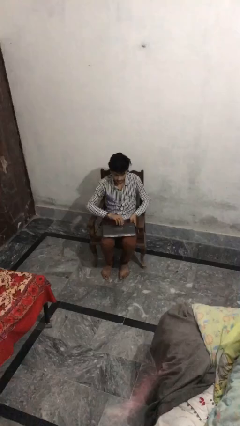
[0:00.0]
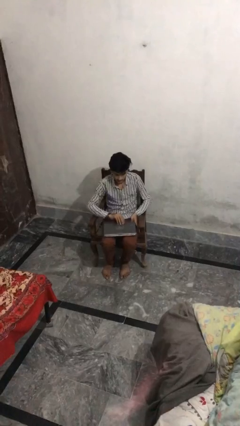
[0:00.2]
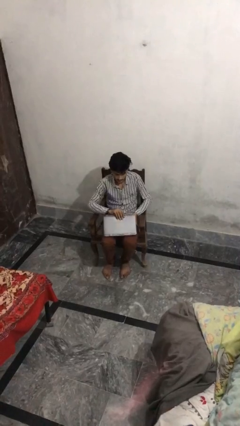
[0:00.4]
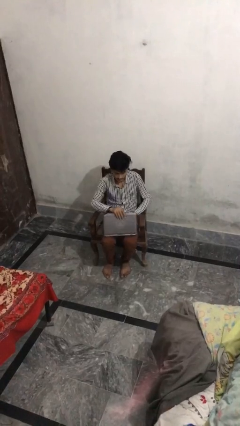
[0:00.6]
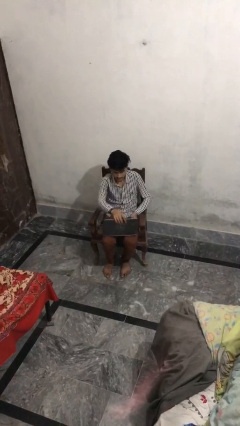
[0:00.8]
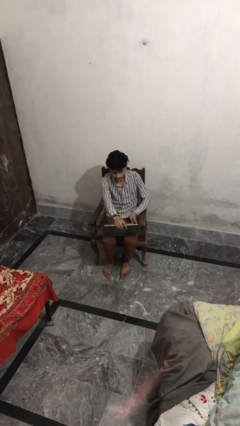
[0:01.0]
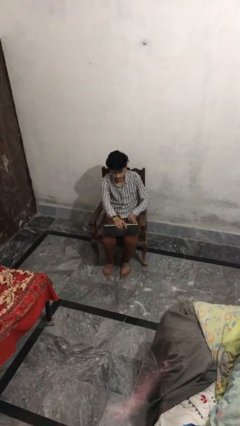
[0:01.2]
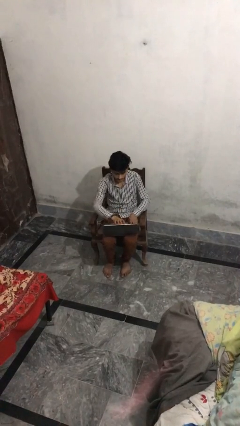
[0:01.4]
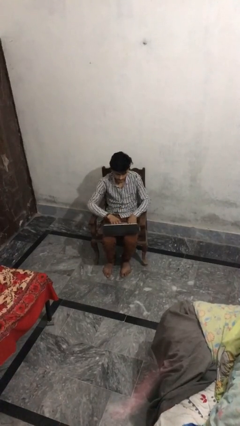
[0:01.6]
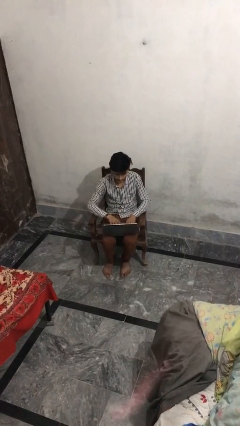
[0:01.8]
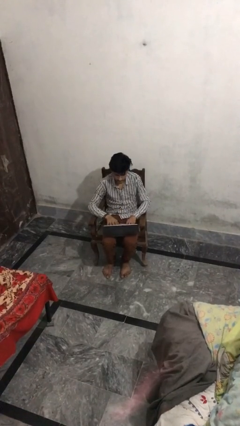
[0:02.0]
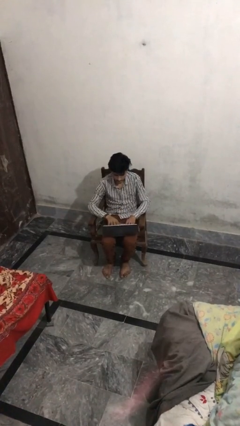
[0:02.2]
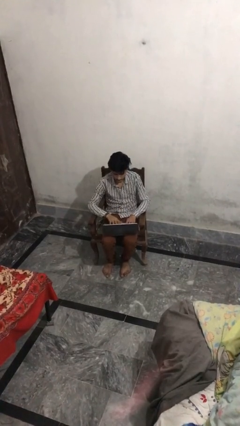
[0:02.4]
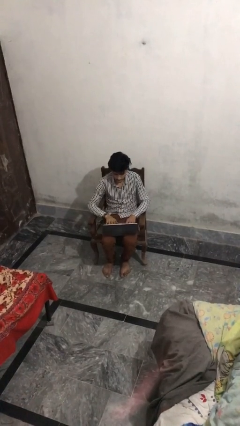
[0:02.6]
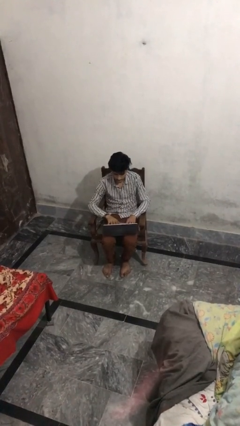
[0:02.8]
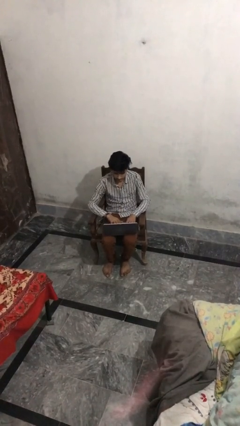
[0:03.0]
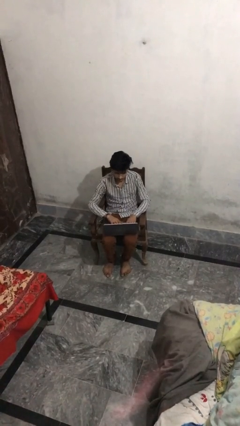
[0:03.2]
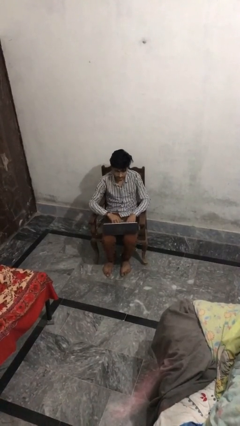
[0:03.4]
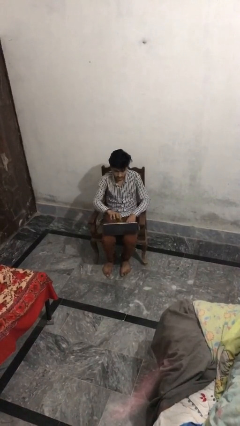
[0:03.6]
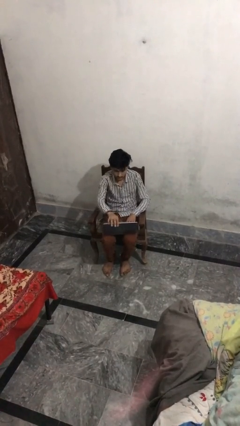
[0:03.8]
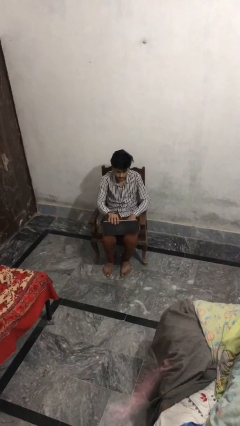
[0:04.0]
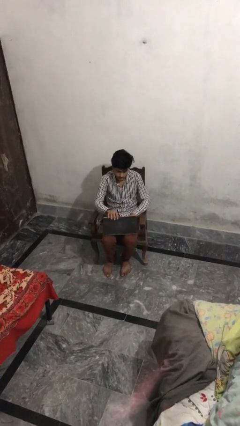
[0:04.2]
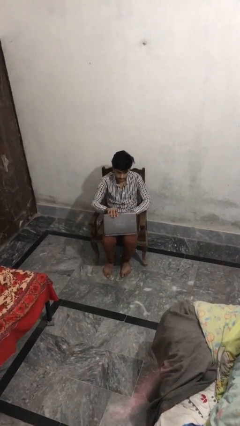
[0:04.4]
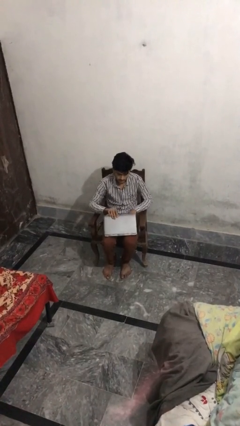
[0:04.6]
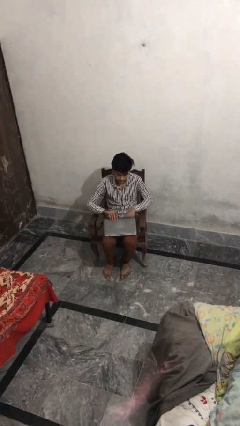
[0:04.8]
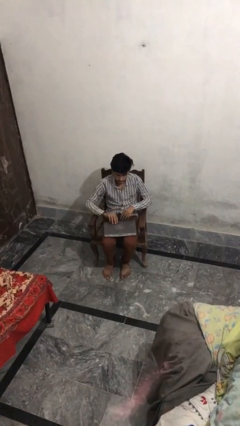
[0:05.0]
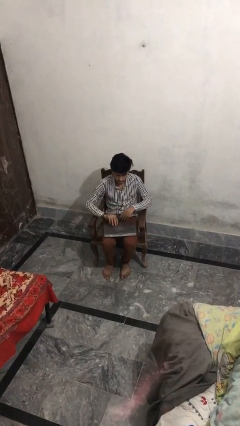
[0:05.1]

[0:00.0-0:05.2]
person interacts with laptop

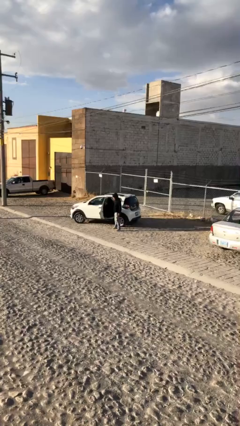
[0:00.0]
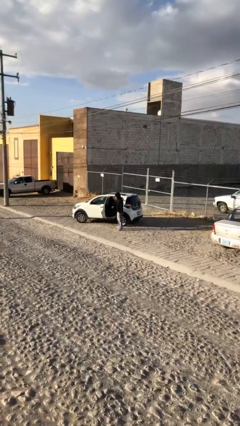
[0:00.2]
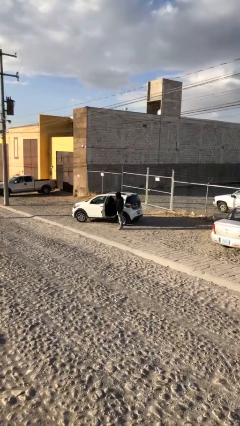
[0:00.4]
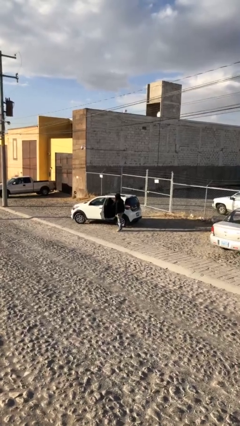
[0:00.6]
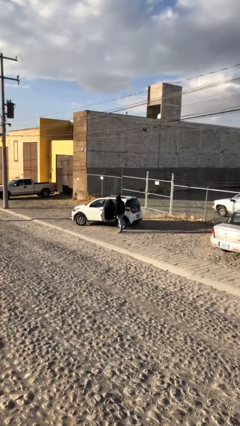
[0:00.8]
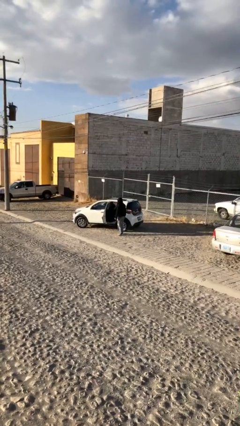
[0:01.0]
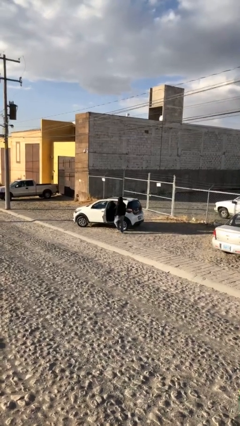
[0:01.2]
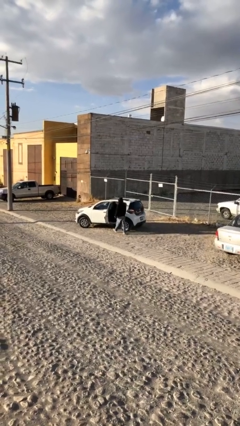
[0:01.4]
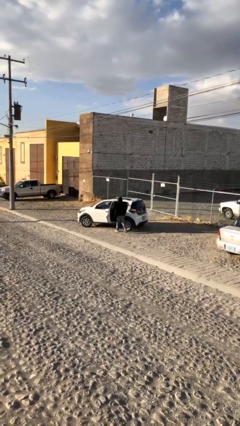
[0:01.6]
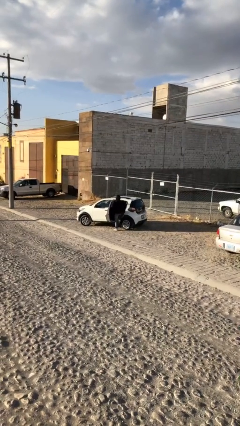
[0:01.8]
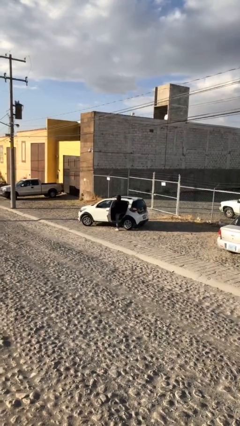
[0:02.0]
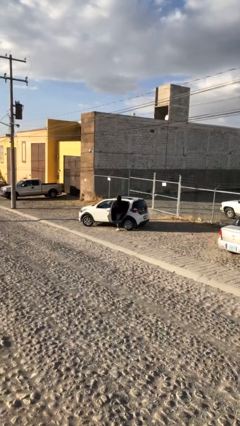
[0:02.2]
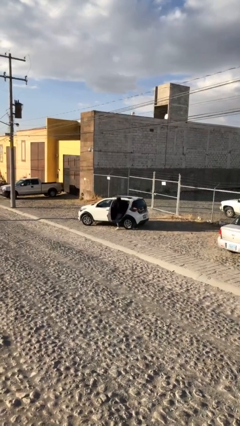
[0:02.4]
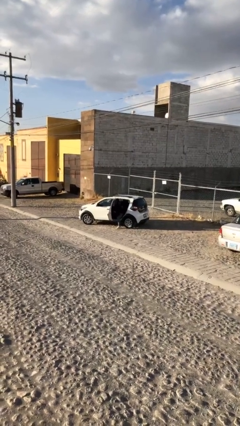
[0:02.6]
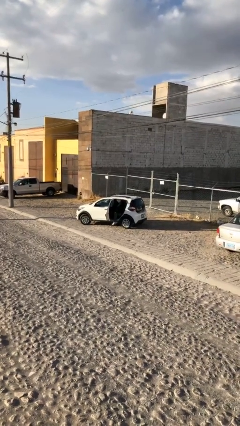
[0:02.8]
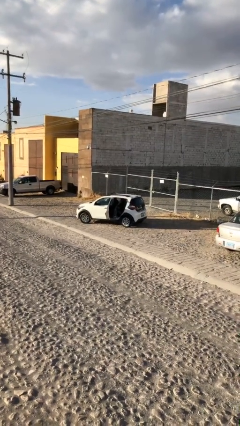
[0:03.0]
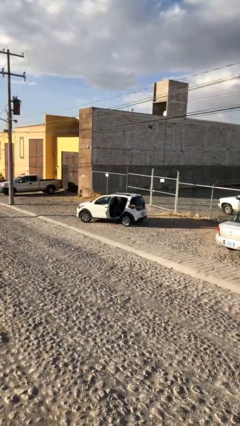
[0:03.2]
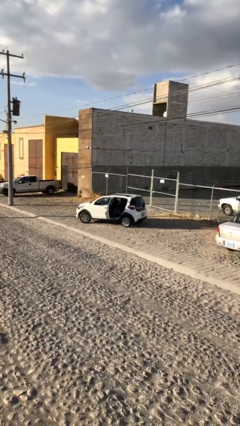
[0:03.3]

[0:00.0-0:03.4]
person enters car

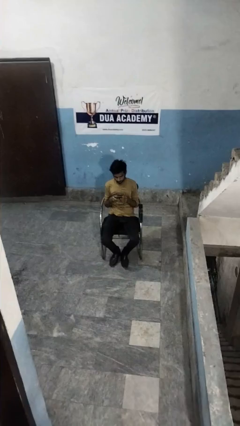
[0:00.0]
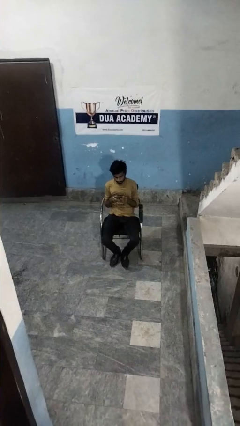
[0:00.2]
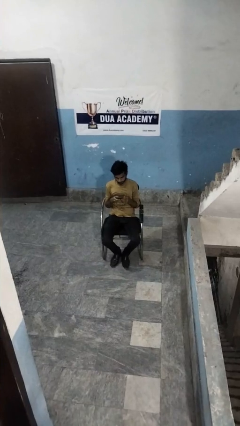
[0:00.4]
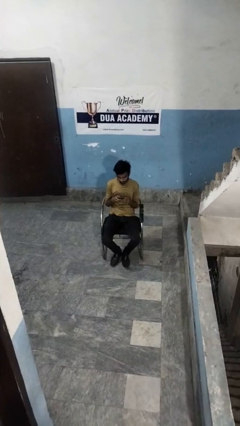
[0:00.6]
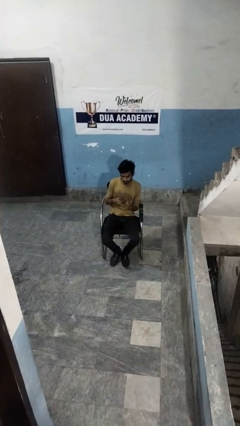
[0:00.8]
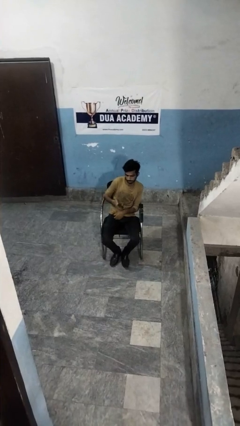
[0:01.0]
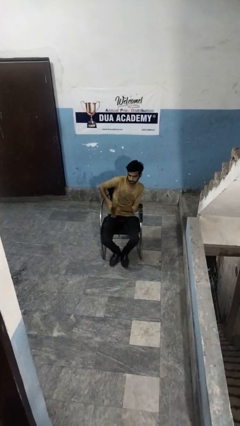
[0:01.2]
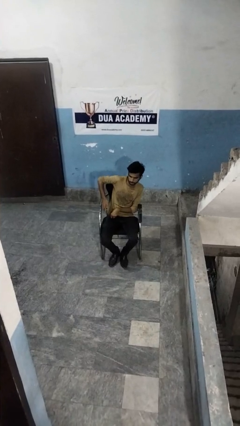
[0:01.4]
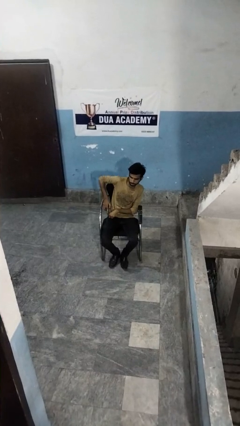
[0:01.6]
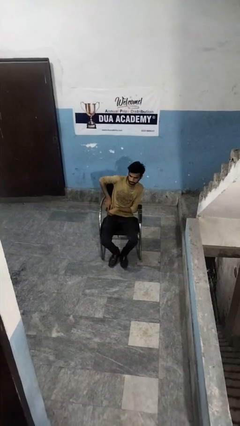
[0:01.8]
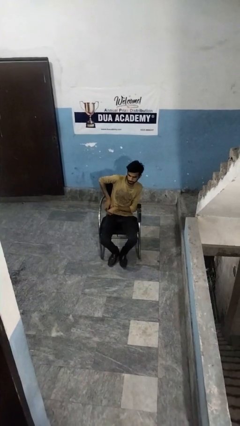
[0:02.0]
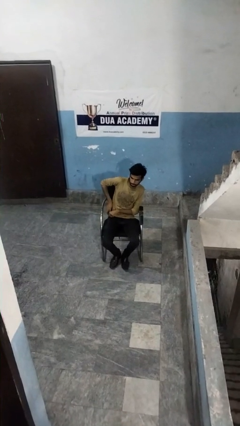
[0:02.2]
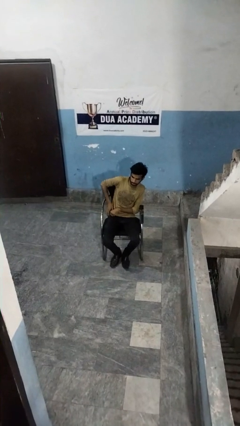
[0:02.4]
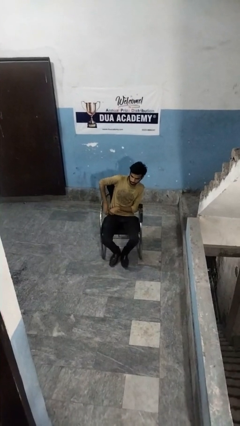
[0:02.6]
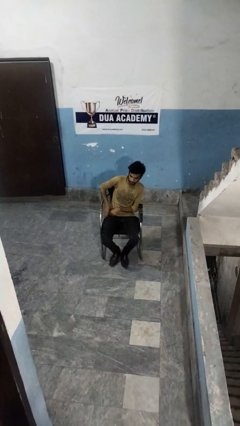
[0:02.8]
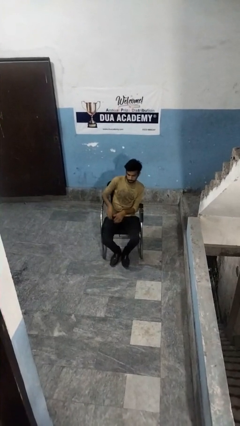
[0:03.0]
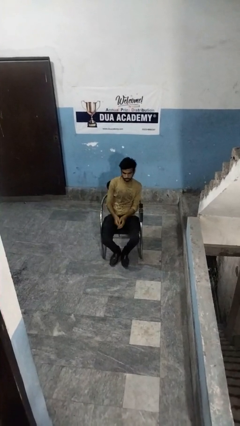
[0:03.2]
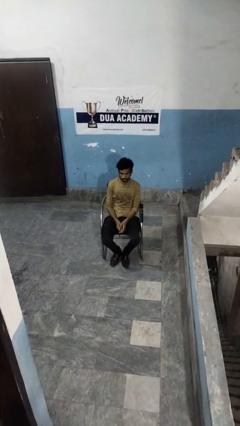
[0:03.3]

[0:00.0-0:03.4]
person puts phone into pocket

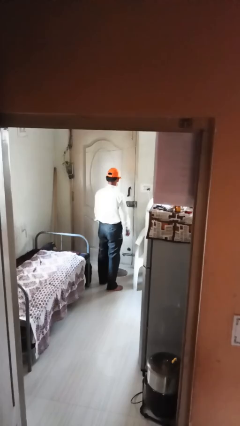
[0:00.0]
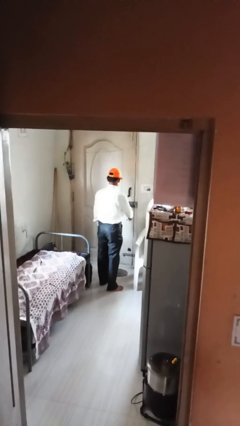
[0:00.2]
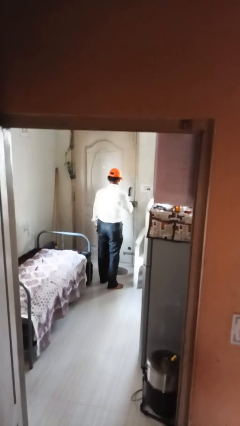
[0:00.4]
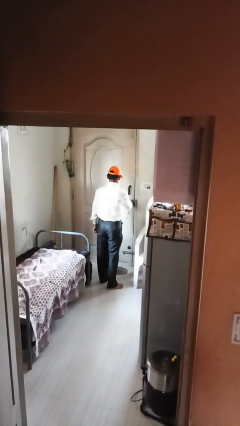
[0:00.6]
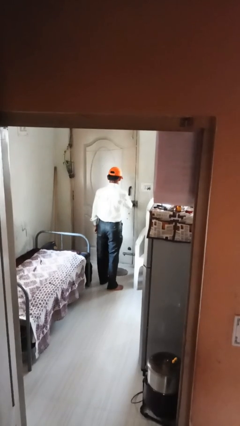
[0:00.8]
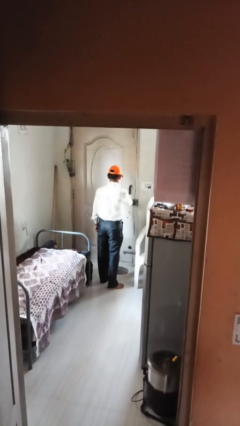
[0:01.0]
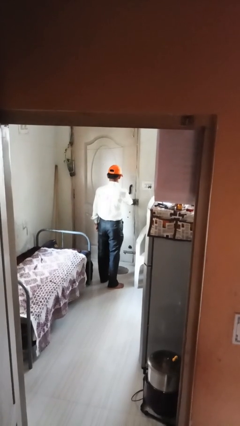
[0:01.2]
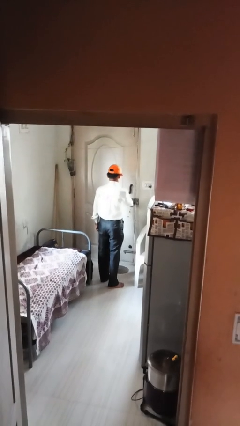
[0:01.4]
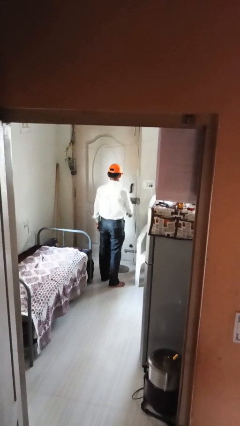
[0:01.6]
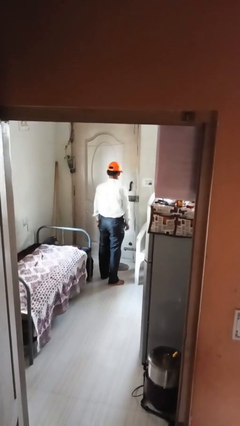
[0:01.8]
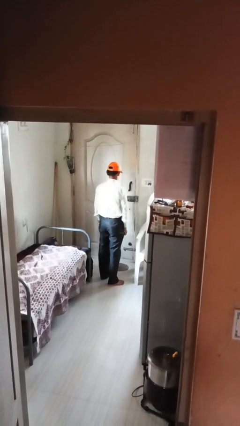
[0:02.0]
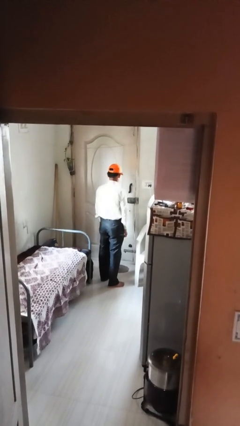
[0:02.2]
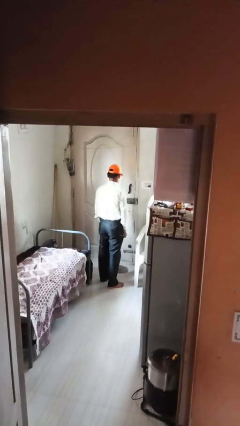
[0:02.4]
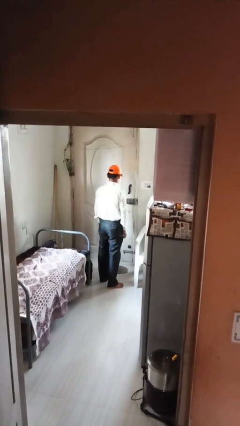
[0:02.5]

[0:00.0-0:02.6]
person unlocks door with keys

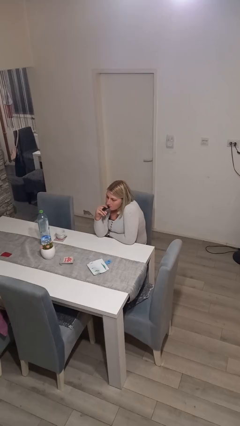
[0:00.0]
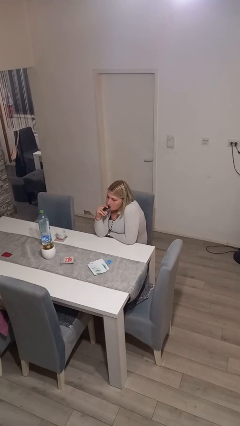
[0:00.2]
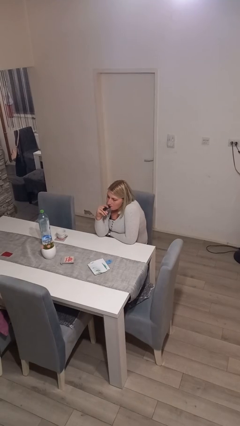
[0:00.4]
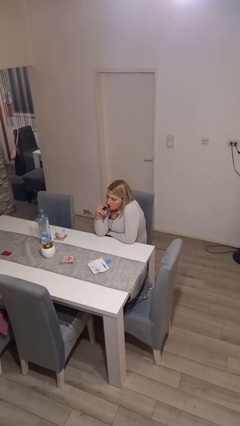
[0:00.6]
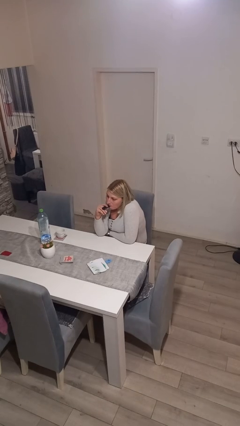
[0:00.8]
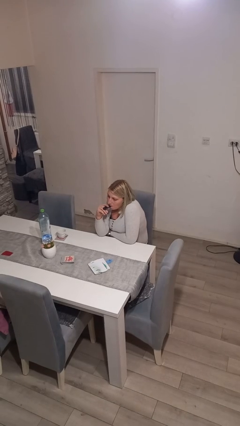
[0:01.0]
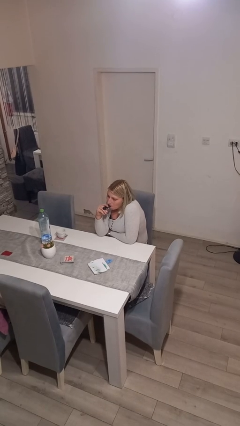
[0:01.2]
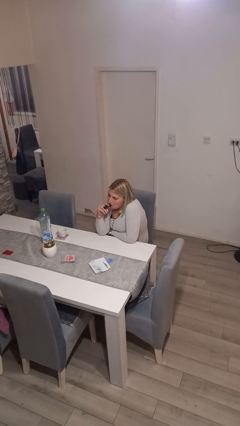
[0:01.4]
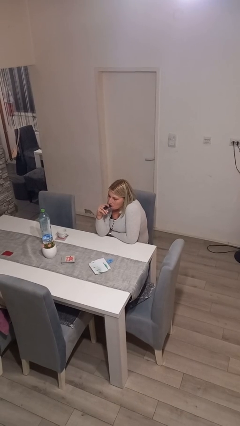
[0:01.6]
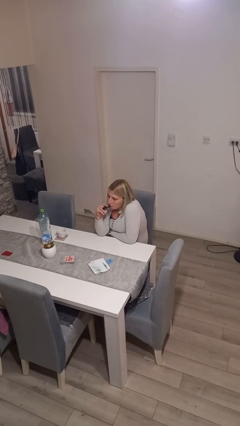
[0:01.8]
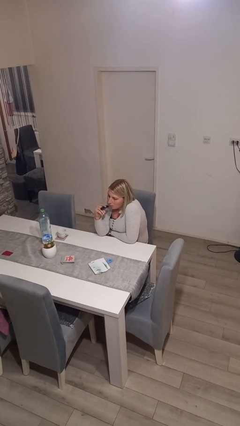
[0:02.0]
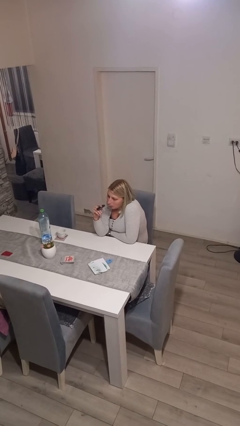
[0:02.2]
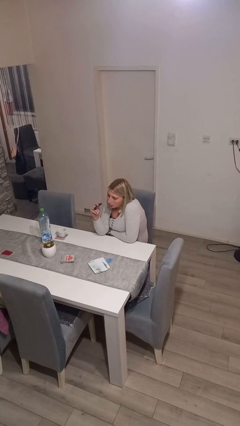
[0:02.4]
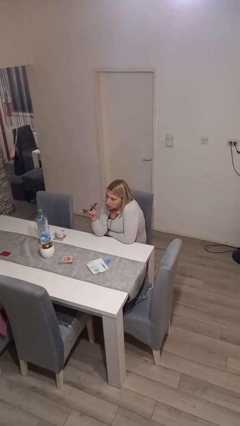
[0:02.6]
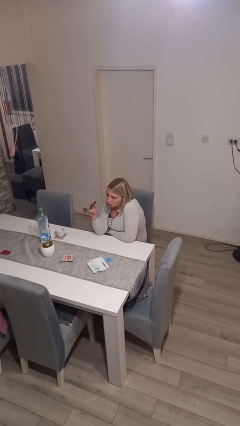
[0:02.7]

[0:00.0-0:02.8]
person vapes

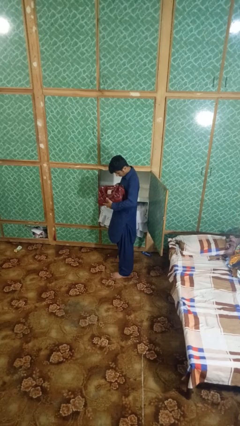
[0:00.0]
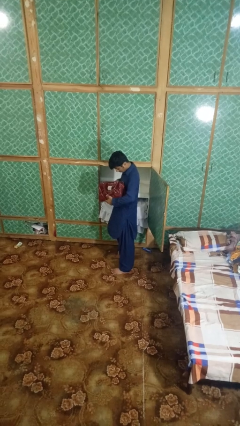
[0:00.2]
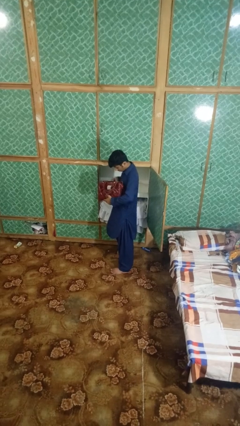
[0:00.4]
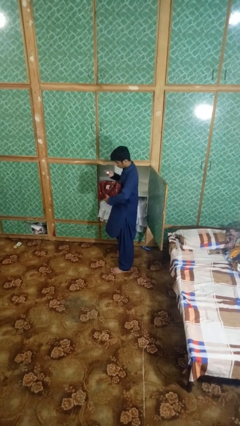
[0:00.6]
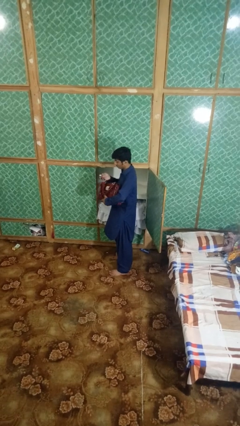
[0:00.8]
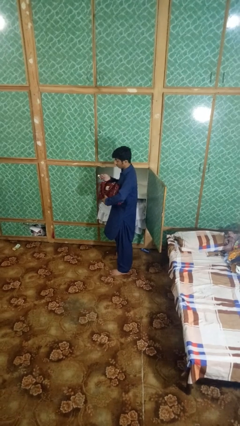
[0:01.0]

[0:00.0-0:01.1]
person takes object from purse
